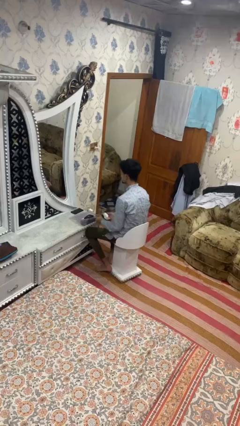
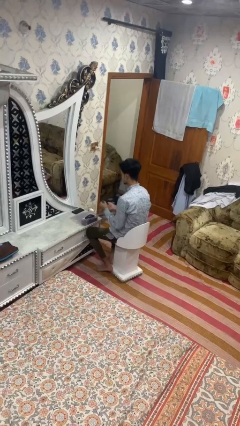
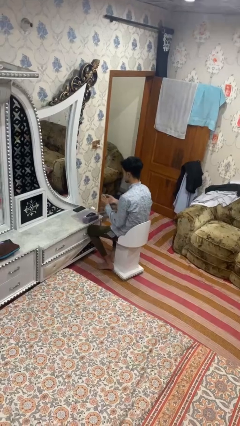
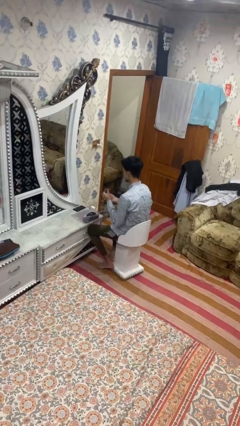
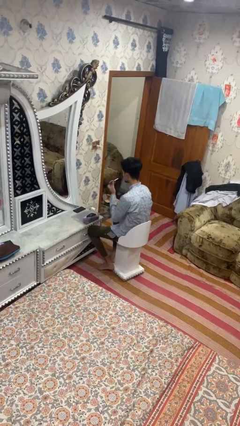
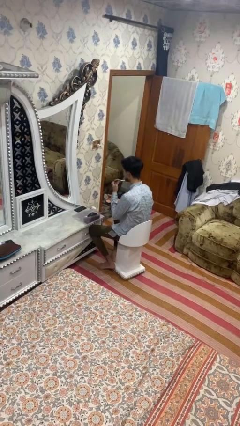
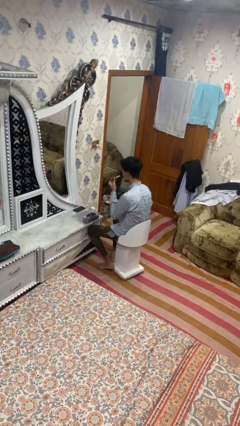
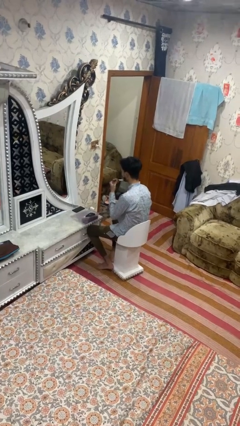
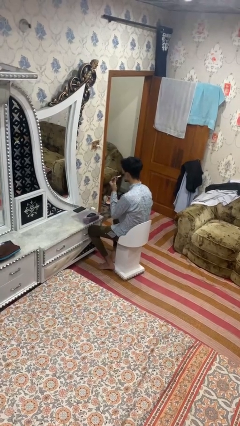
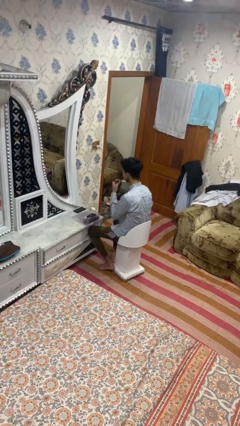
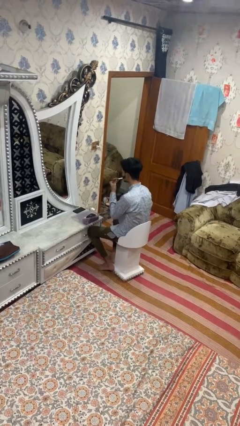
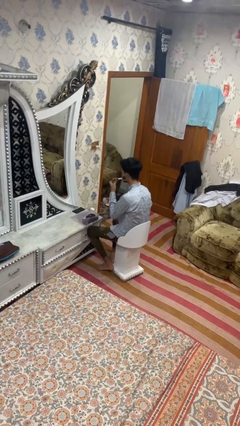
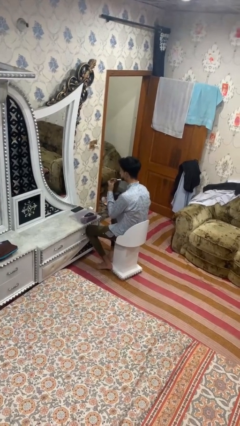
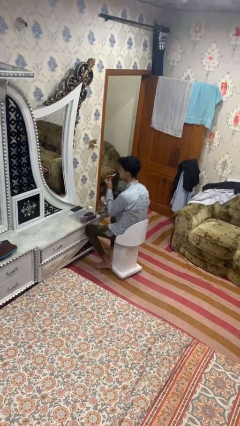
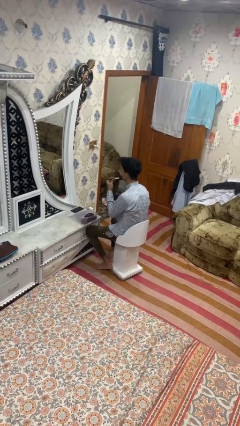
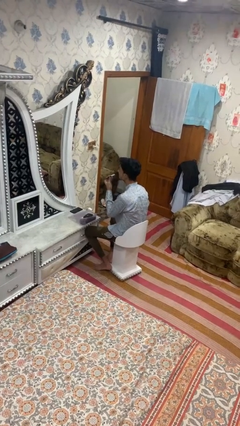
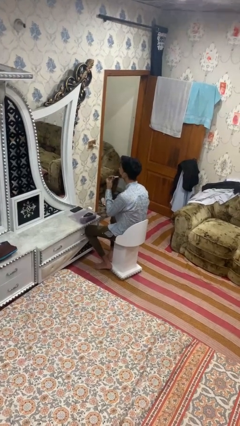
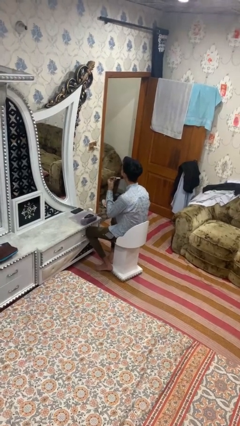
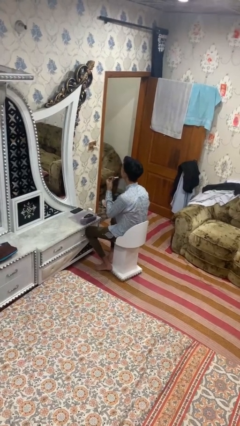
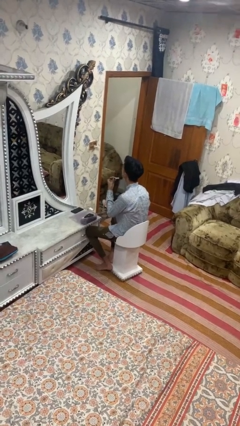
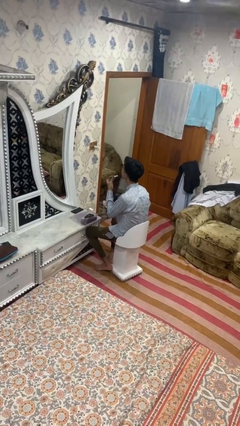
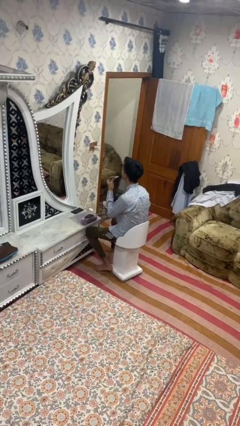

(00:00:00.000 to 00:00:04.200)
person applies foundation makeup

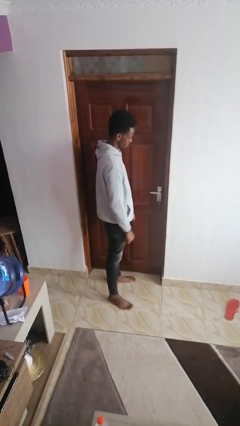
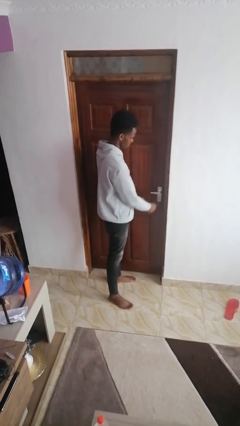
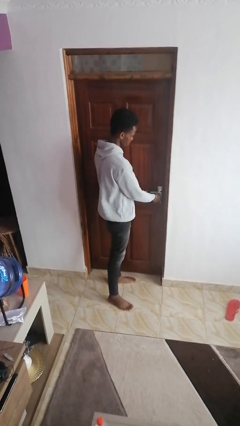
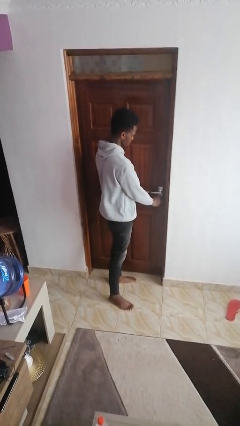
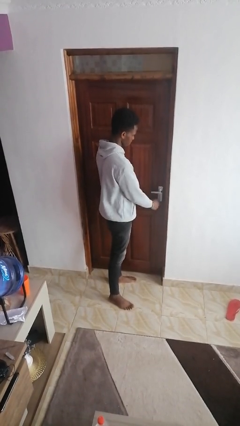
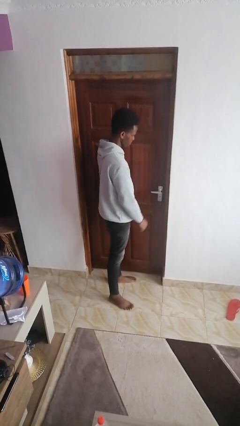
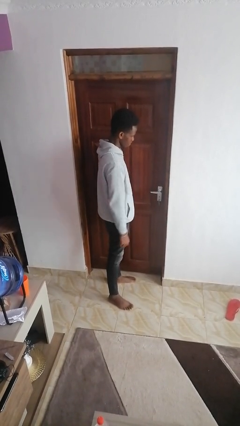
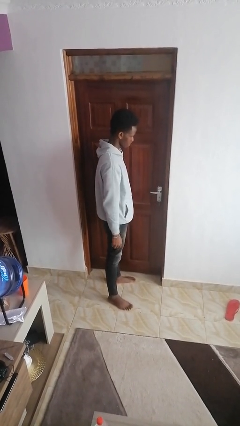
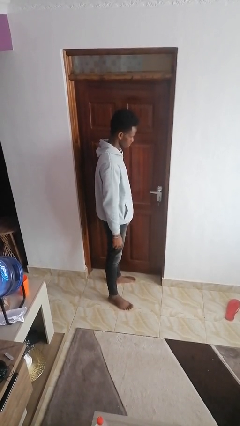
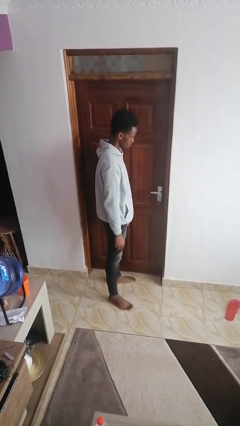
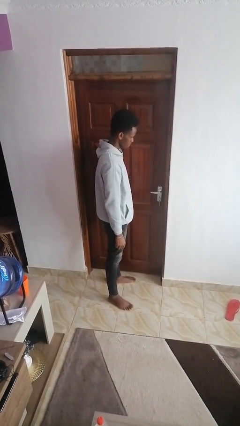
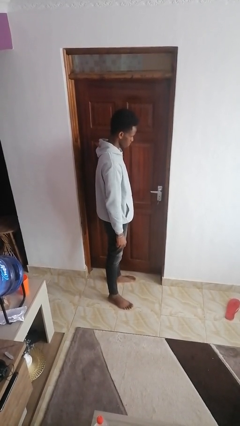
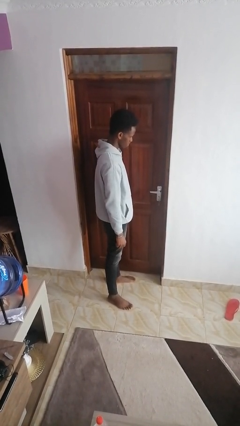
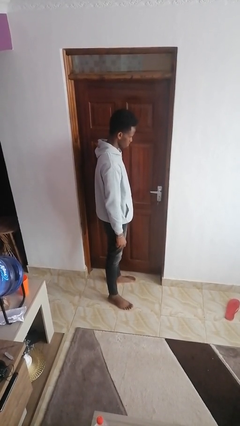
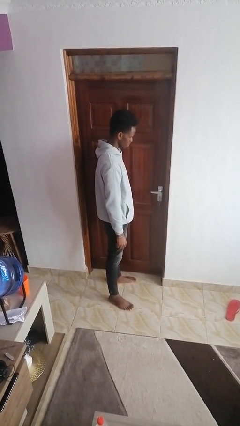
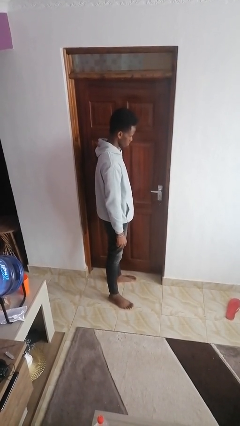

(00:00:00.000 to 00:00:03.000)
person unlocks door with keys

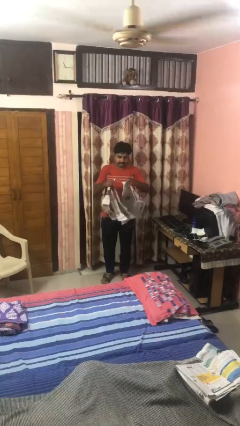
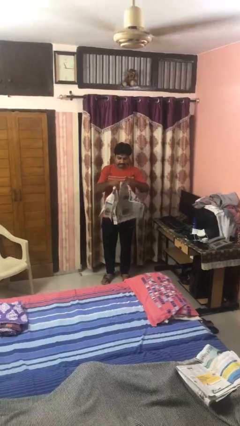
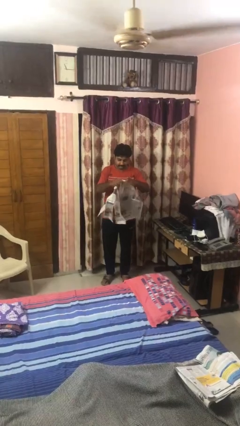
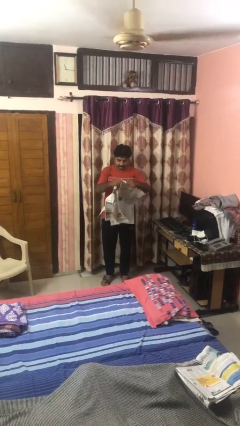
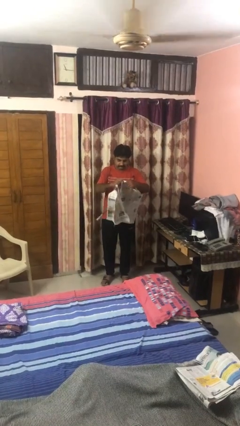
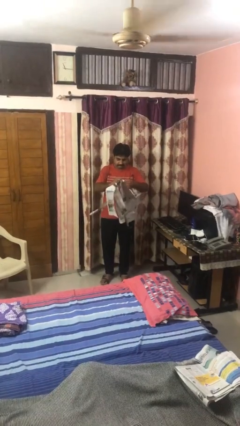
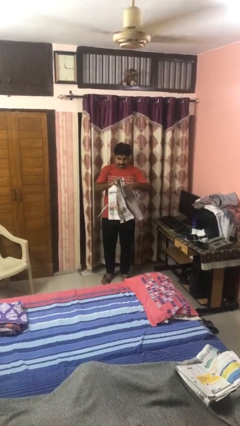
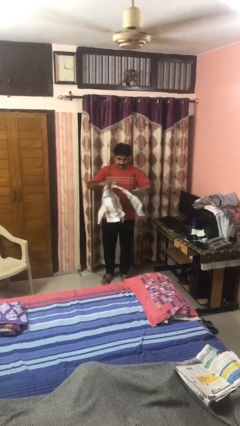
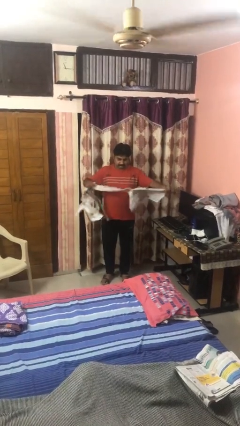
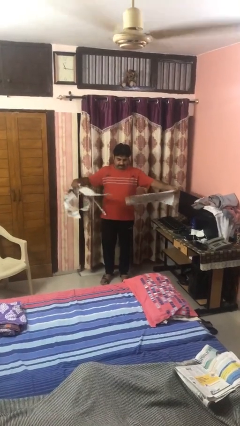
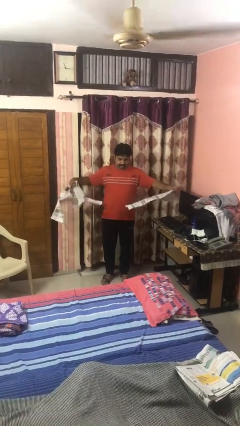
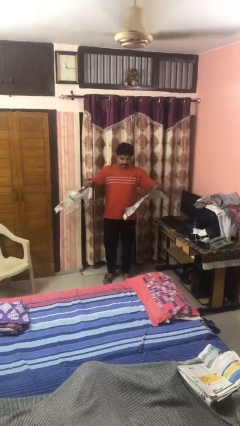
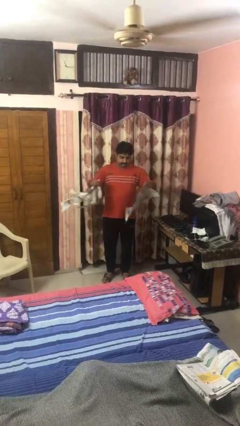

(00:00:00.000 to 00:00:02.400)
person tears paper

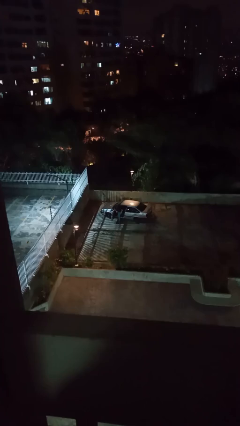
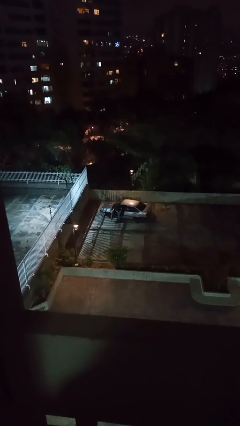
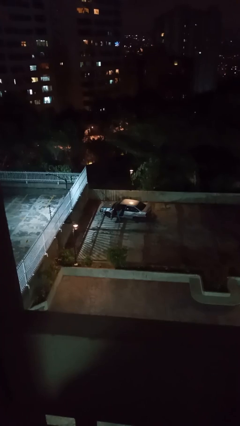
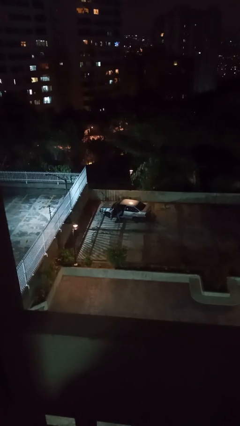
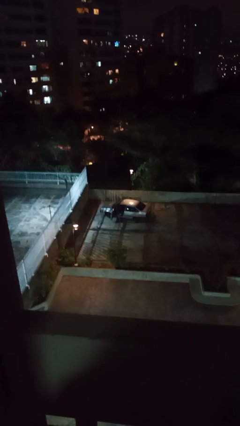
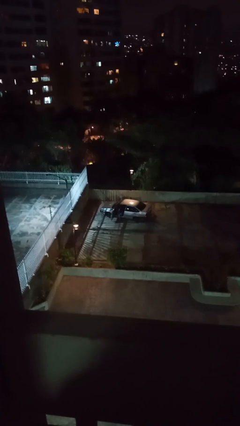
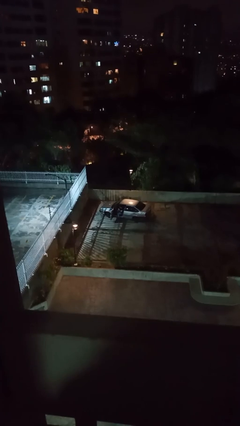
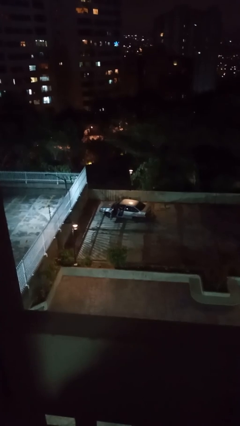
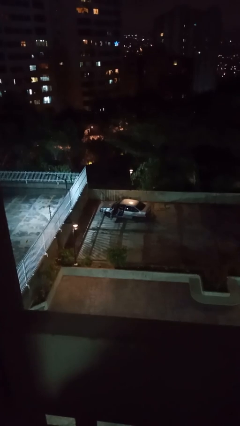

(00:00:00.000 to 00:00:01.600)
person enters car

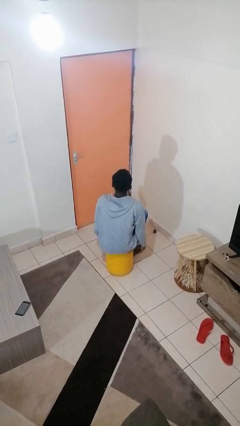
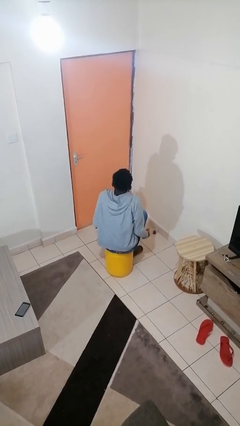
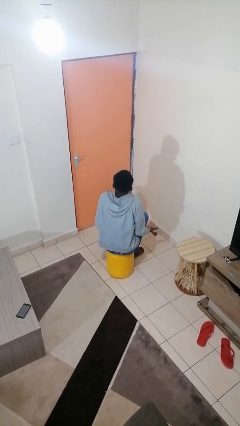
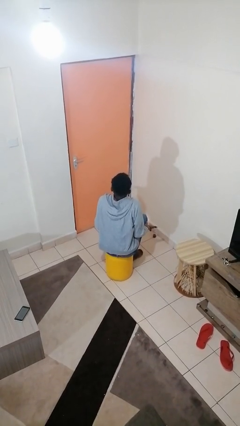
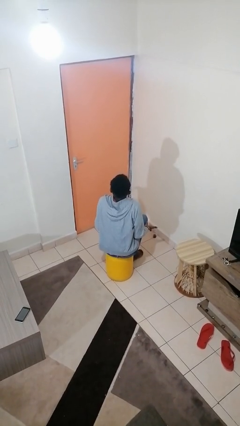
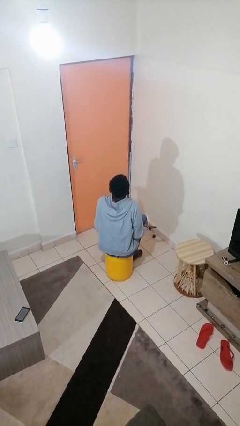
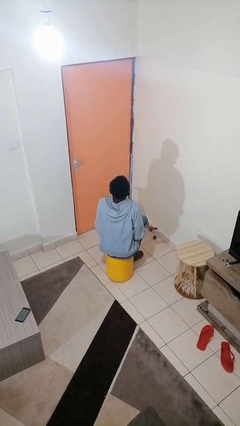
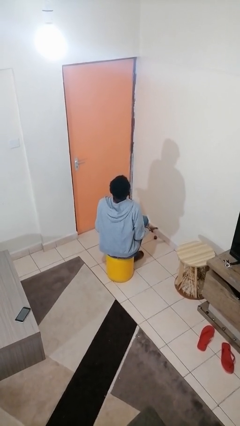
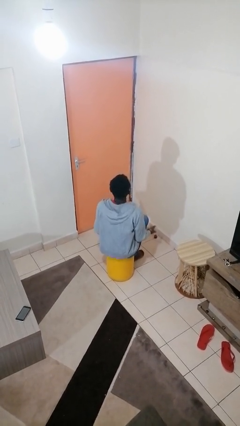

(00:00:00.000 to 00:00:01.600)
person shrugs

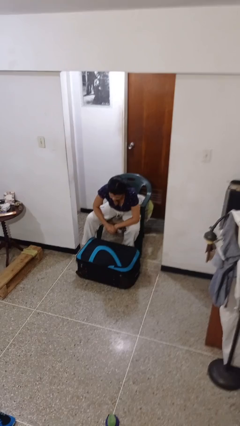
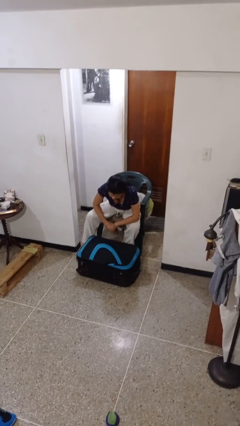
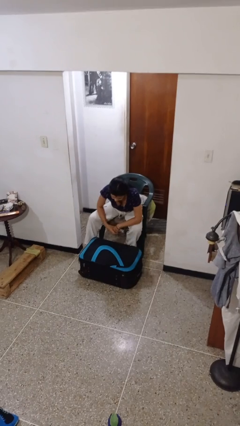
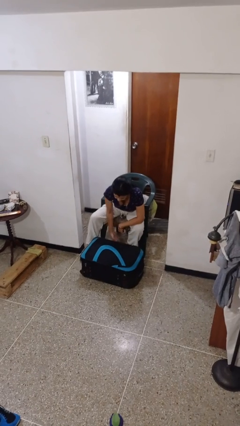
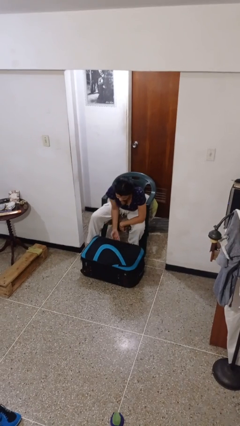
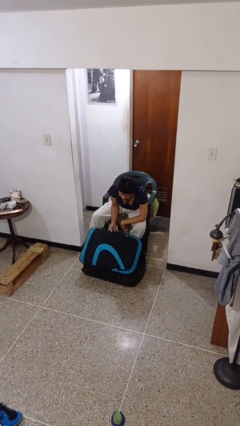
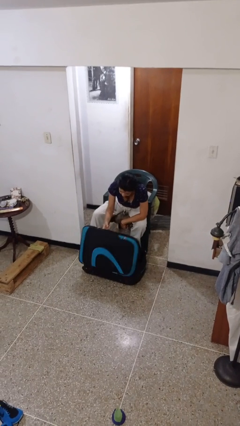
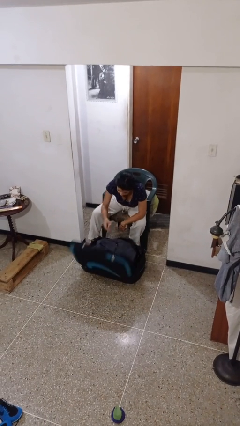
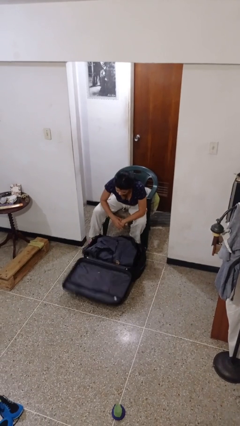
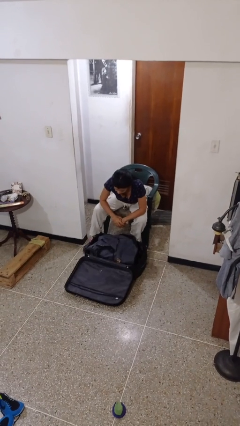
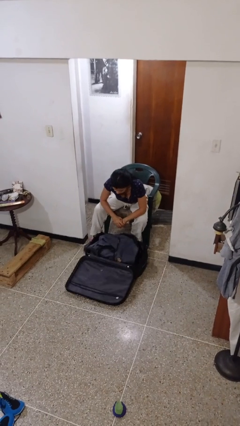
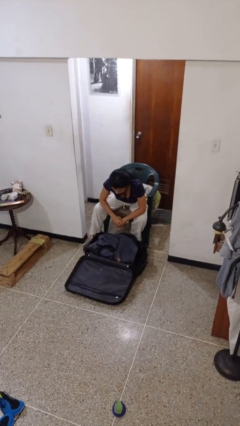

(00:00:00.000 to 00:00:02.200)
person opens suitcase

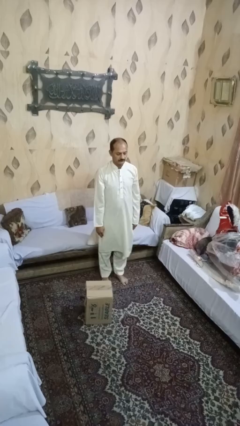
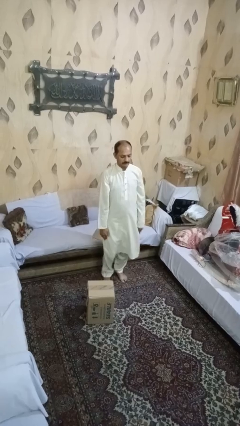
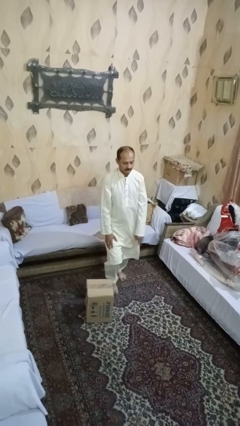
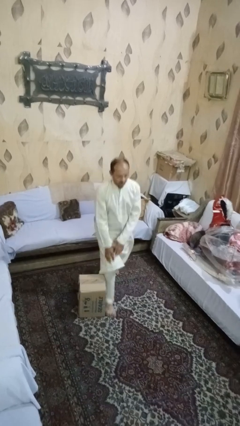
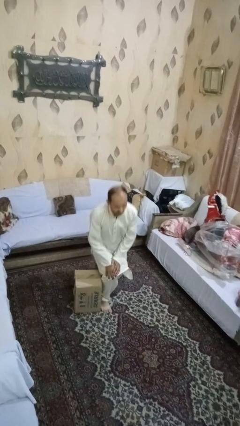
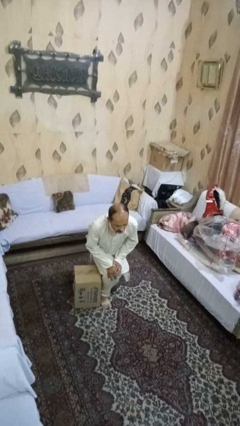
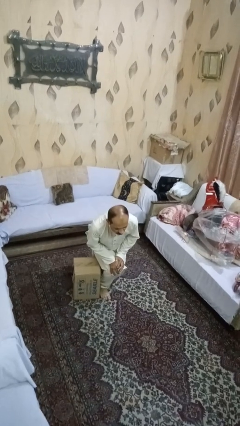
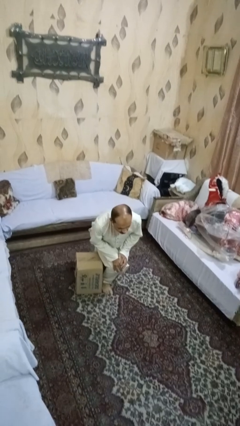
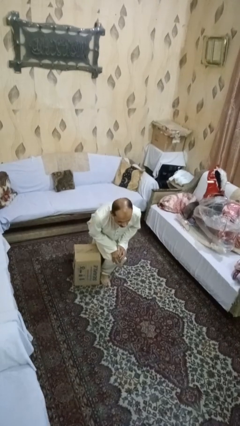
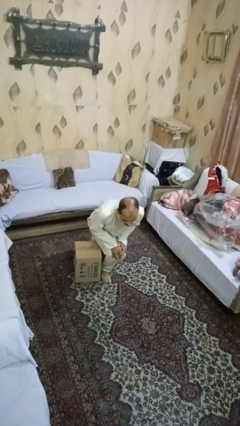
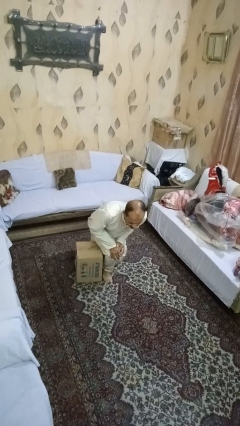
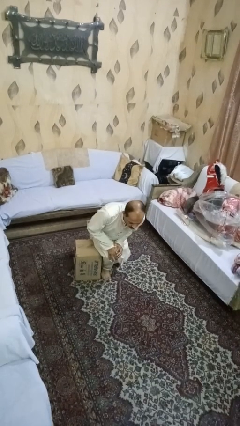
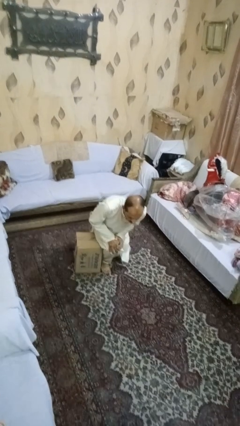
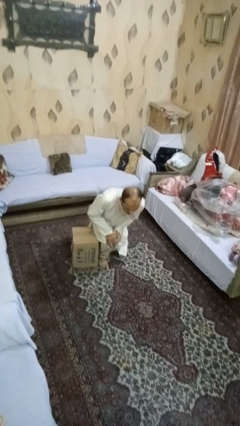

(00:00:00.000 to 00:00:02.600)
person trips on object on floor
